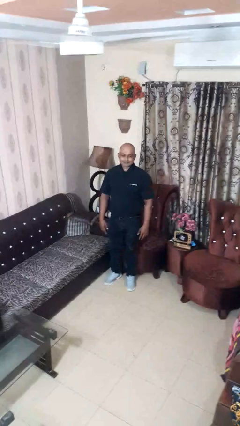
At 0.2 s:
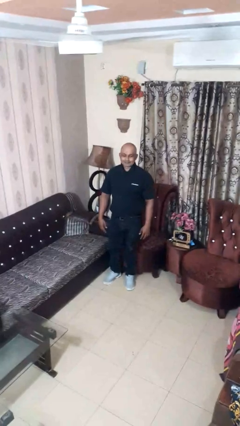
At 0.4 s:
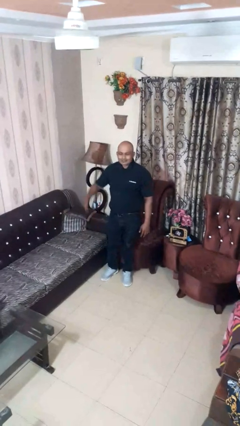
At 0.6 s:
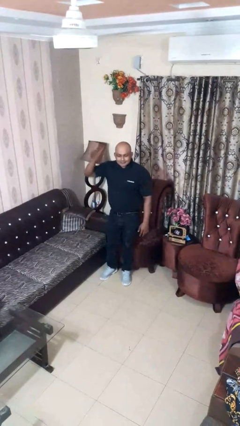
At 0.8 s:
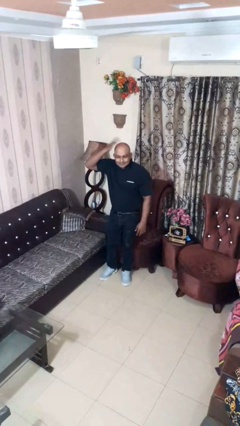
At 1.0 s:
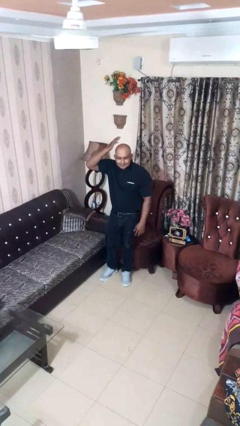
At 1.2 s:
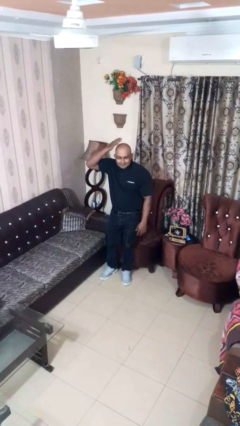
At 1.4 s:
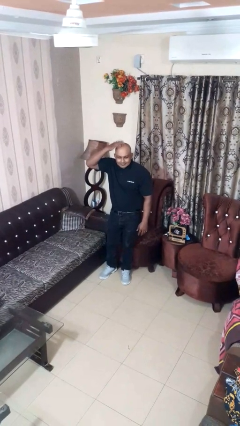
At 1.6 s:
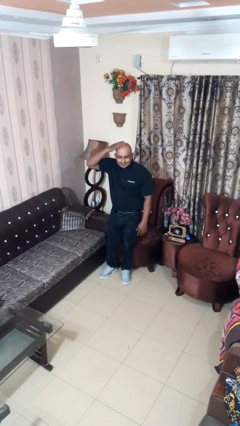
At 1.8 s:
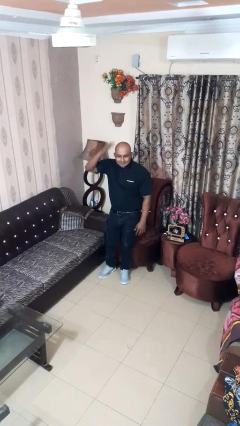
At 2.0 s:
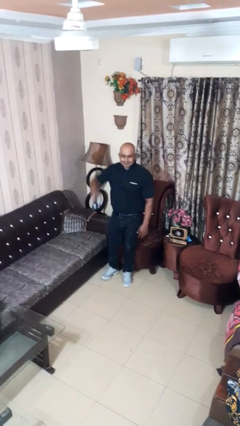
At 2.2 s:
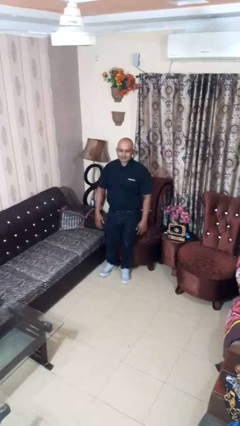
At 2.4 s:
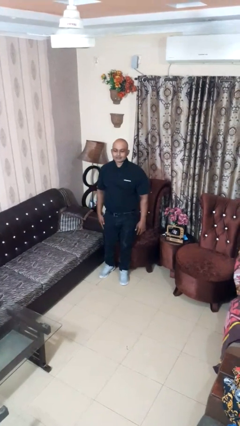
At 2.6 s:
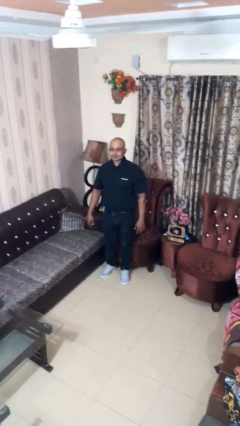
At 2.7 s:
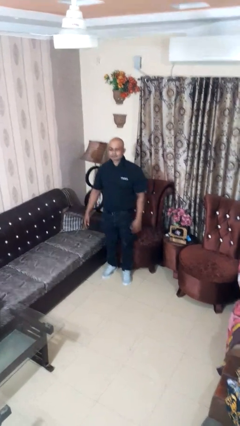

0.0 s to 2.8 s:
person pats head

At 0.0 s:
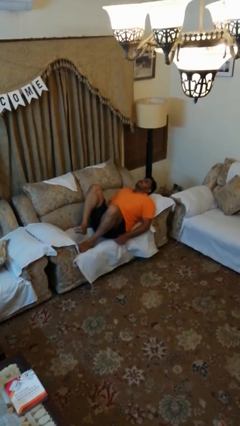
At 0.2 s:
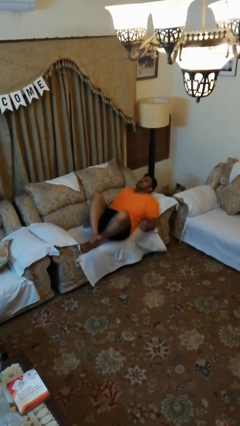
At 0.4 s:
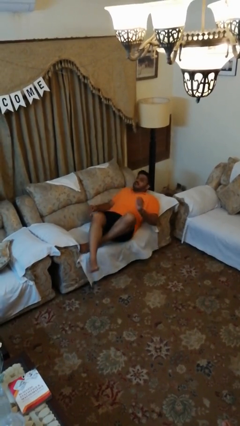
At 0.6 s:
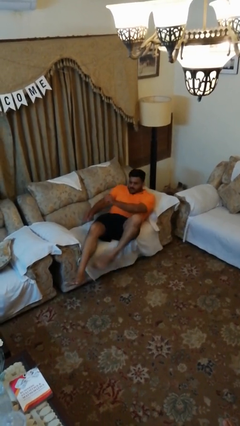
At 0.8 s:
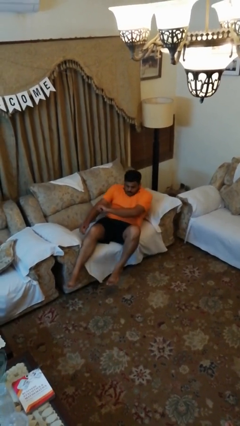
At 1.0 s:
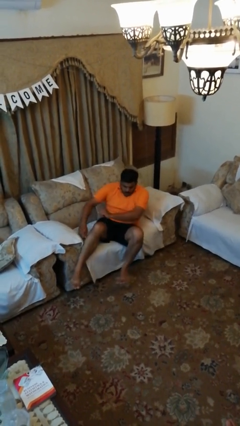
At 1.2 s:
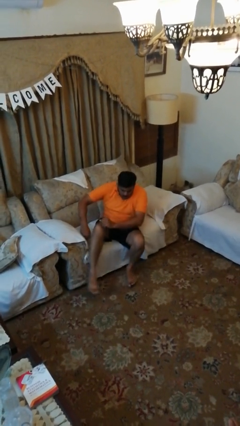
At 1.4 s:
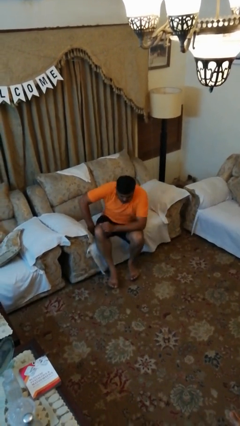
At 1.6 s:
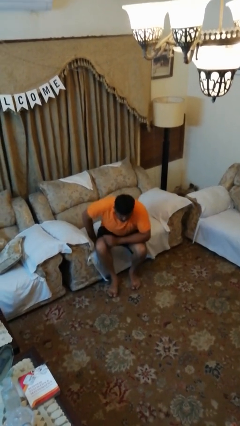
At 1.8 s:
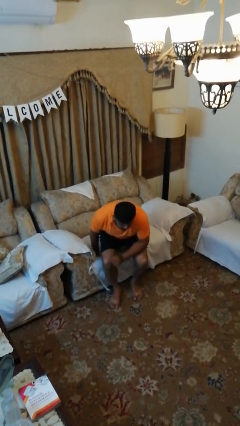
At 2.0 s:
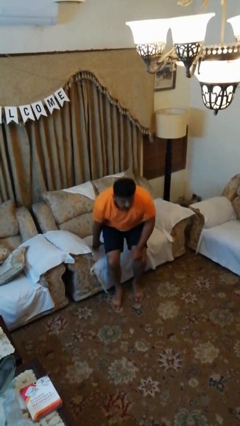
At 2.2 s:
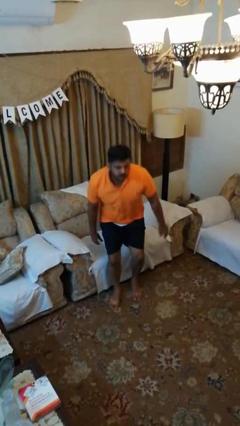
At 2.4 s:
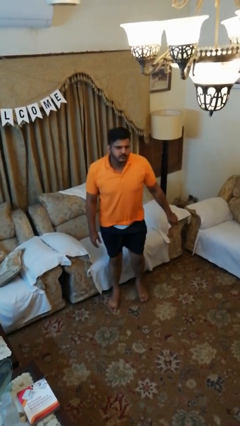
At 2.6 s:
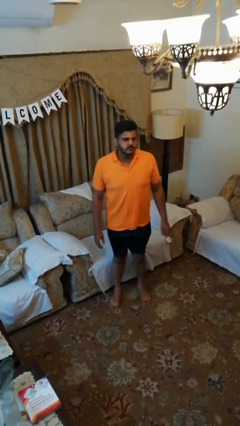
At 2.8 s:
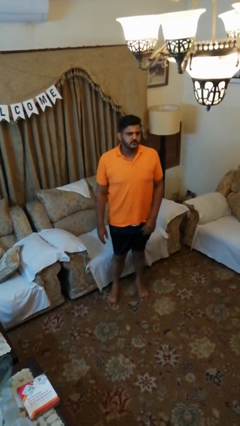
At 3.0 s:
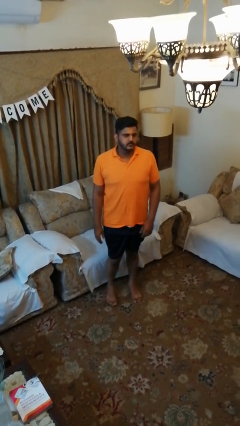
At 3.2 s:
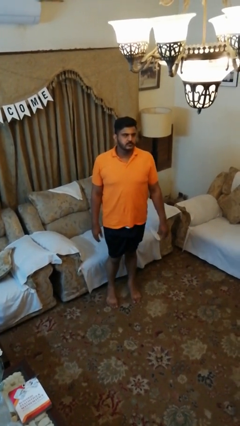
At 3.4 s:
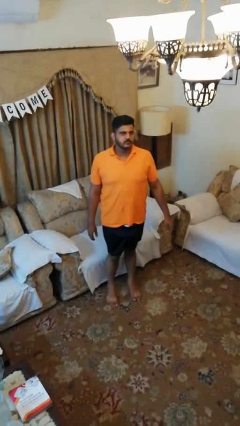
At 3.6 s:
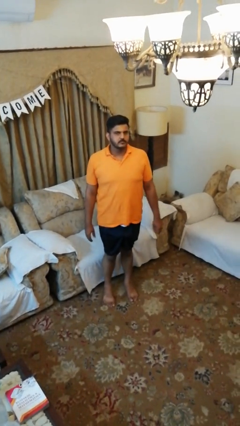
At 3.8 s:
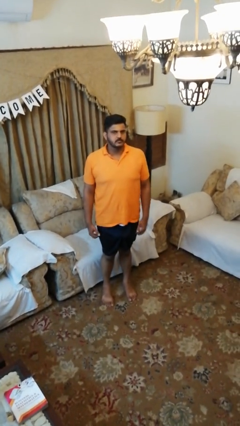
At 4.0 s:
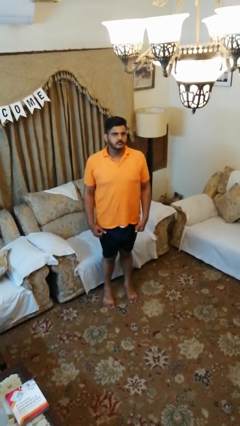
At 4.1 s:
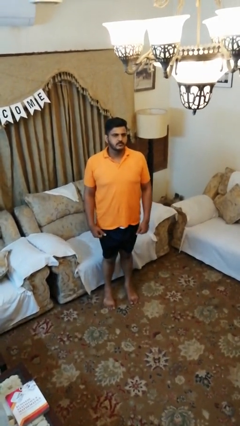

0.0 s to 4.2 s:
person stands up

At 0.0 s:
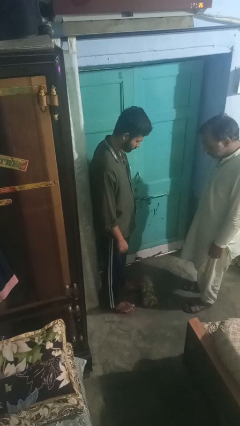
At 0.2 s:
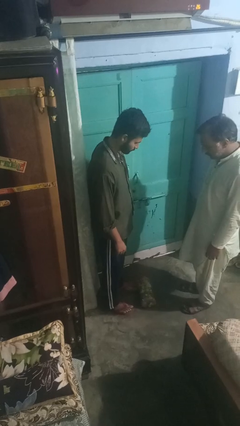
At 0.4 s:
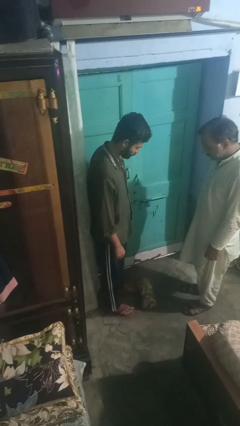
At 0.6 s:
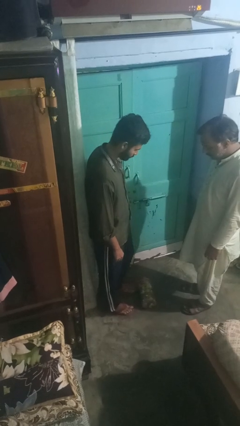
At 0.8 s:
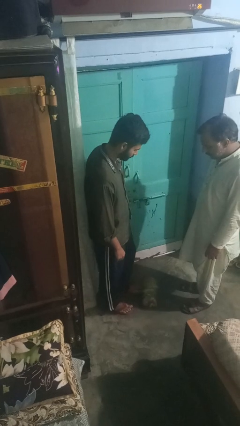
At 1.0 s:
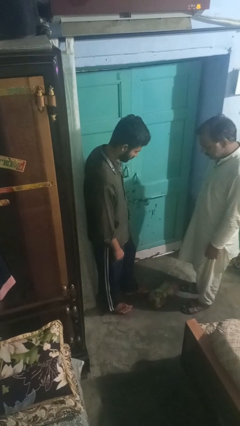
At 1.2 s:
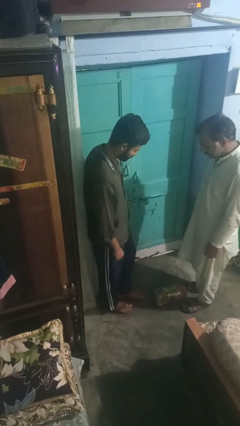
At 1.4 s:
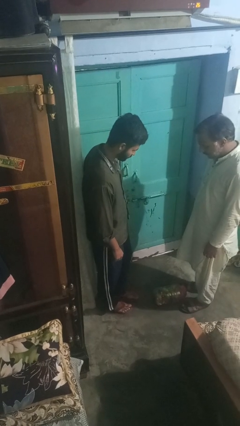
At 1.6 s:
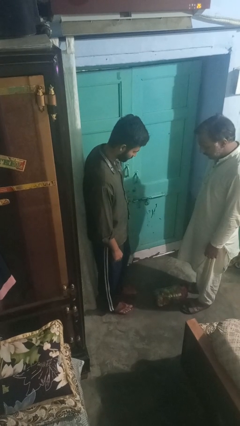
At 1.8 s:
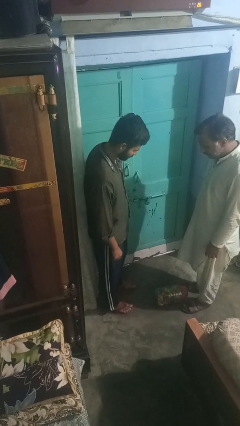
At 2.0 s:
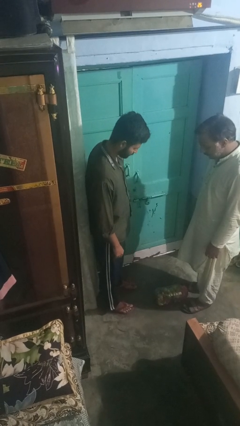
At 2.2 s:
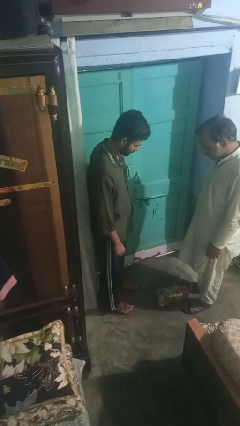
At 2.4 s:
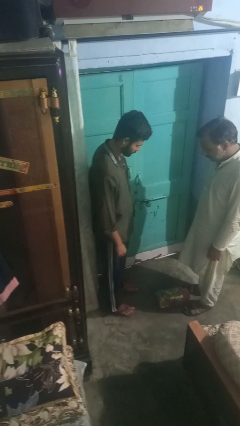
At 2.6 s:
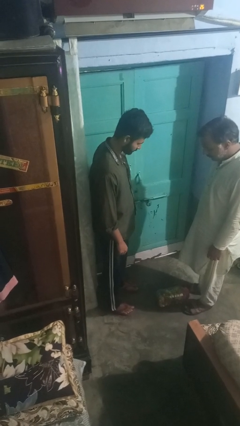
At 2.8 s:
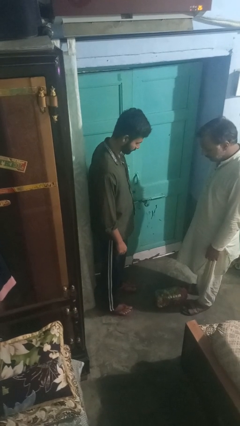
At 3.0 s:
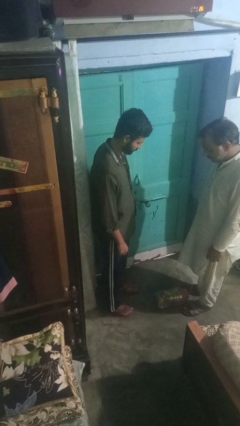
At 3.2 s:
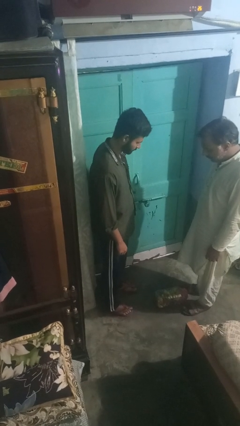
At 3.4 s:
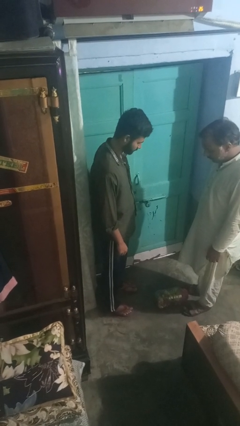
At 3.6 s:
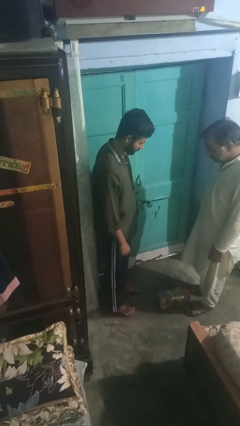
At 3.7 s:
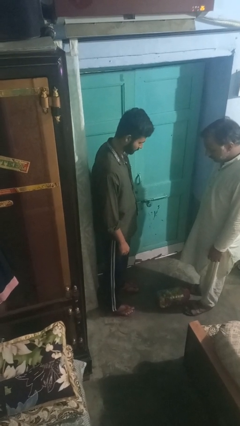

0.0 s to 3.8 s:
person kicks object to person

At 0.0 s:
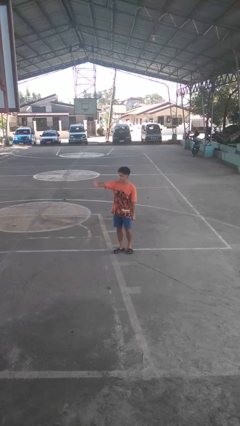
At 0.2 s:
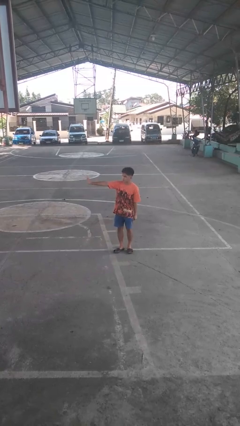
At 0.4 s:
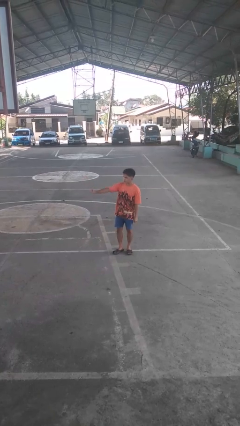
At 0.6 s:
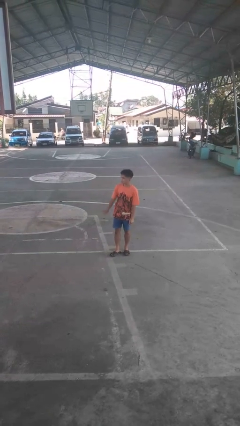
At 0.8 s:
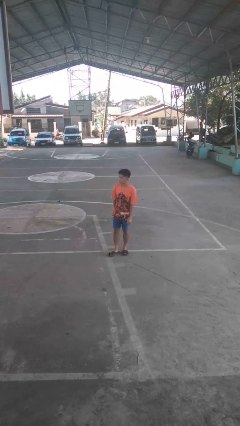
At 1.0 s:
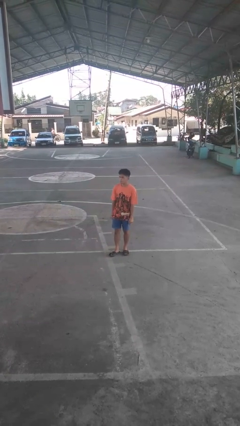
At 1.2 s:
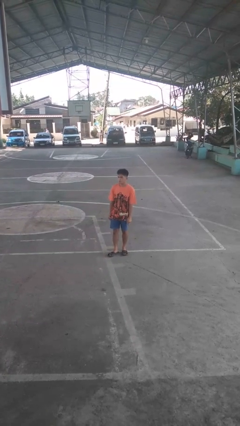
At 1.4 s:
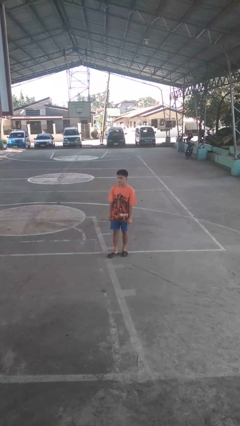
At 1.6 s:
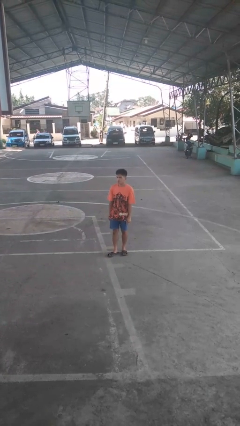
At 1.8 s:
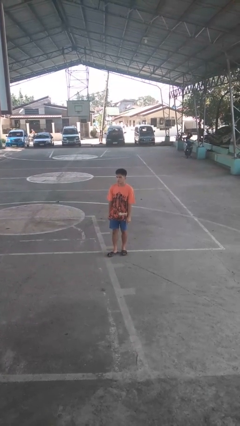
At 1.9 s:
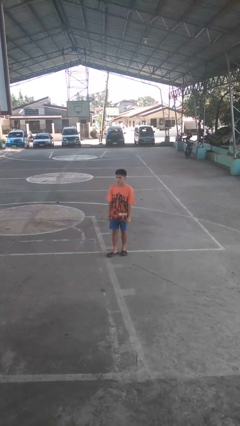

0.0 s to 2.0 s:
person gestures swipe right

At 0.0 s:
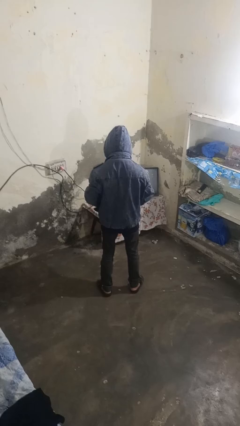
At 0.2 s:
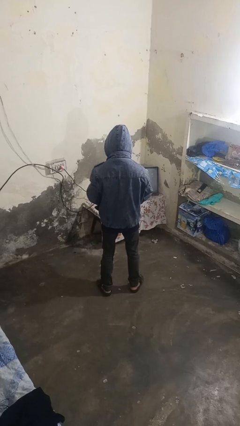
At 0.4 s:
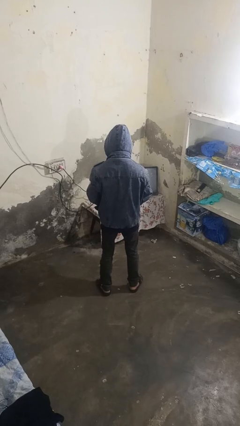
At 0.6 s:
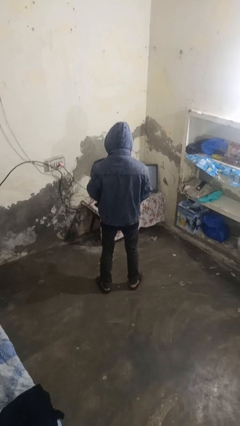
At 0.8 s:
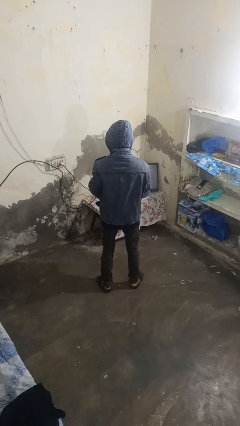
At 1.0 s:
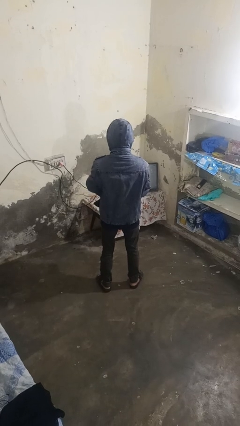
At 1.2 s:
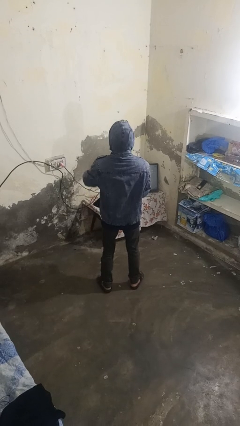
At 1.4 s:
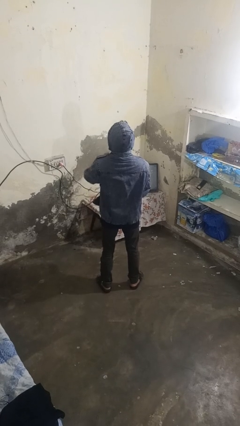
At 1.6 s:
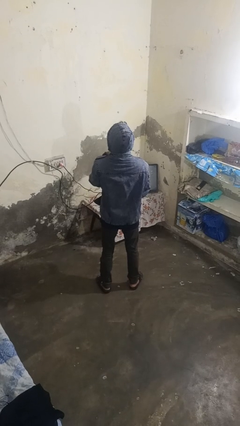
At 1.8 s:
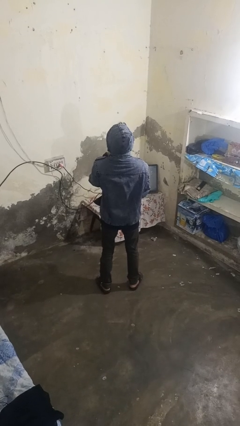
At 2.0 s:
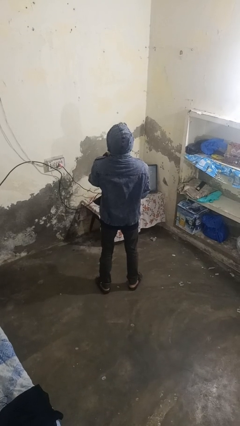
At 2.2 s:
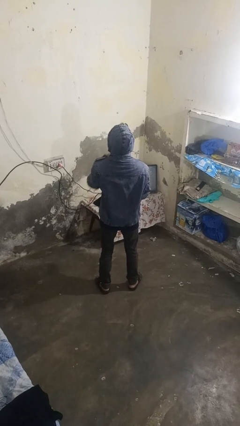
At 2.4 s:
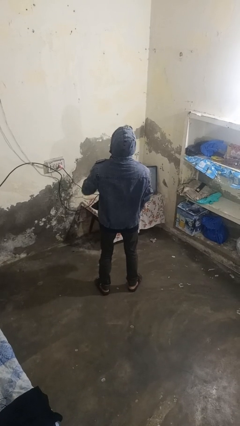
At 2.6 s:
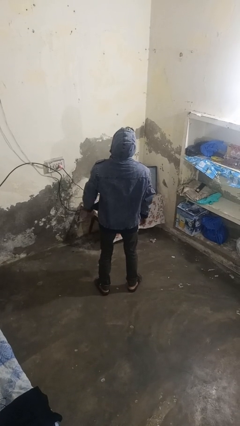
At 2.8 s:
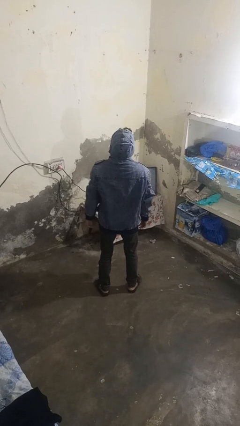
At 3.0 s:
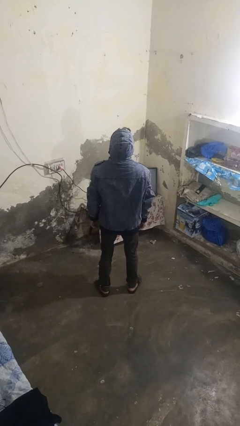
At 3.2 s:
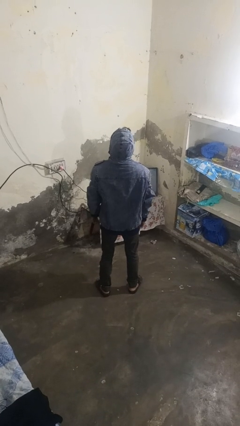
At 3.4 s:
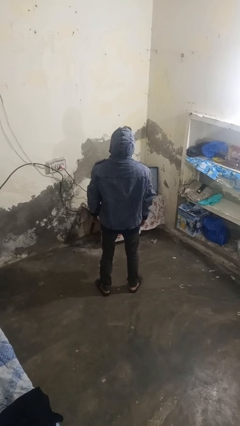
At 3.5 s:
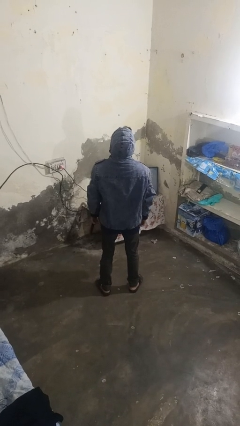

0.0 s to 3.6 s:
person zips up jacket

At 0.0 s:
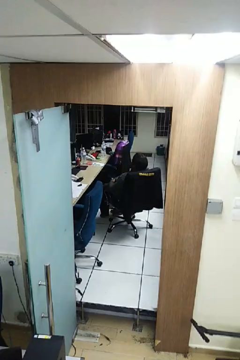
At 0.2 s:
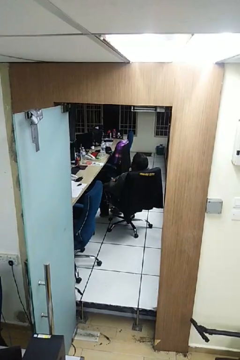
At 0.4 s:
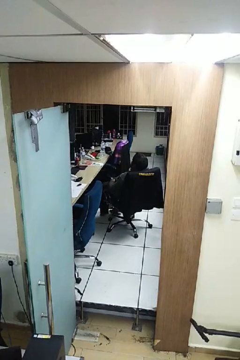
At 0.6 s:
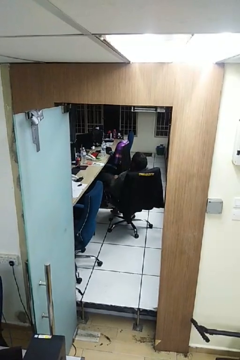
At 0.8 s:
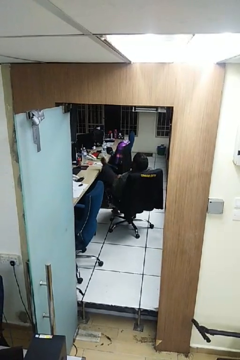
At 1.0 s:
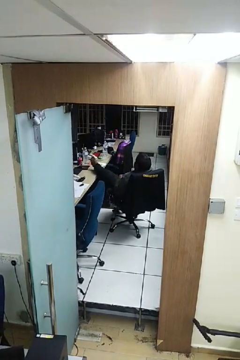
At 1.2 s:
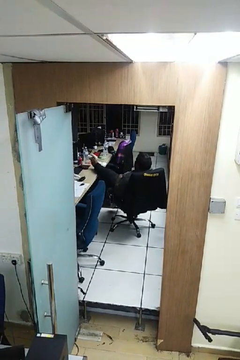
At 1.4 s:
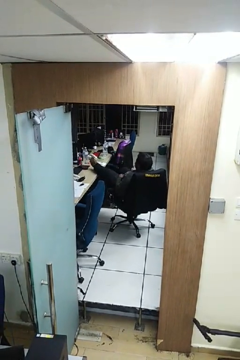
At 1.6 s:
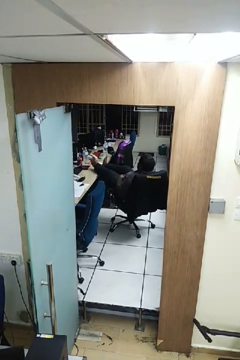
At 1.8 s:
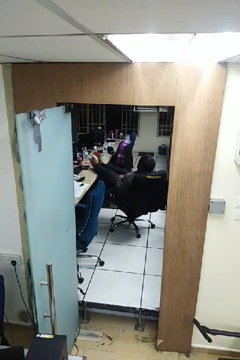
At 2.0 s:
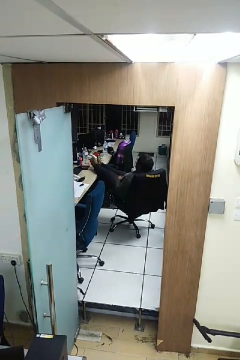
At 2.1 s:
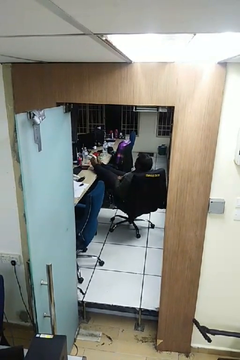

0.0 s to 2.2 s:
person puts feet up
